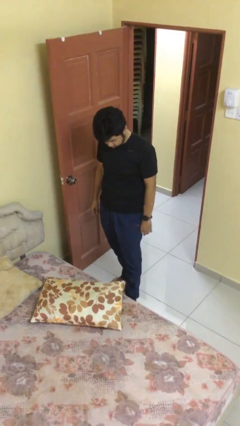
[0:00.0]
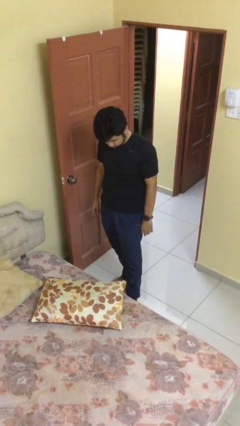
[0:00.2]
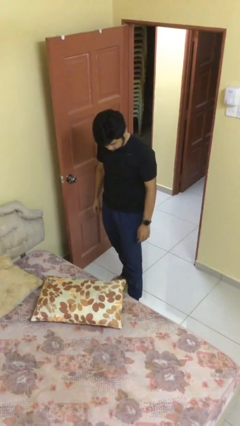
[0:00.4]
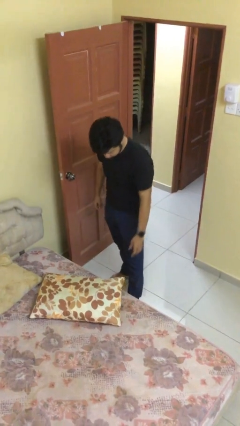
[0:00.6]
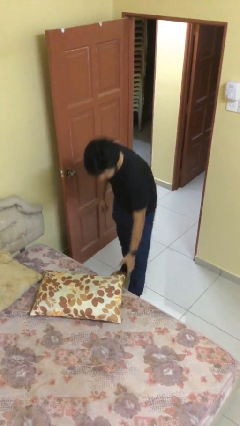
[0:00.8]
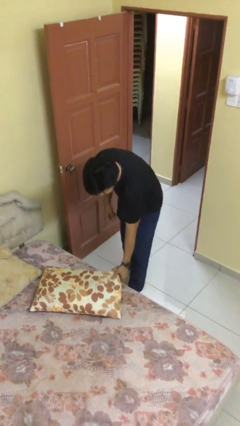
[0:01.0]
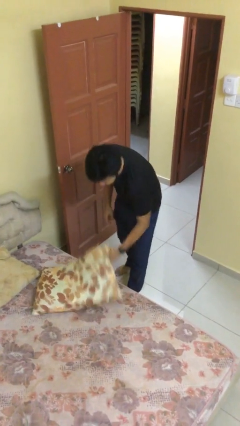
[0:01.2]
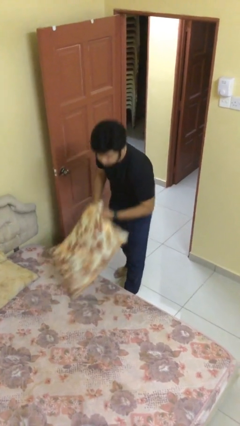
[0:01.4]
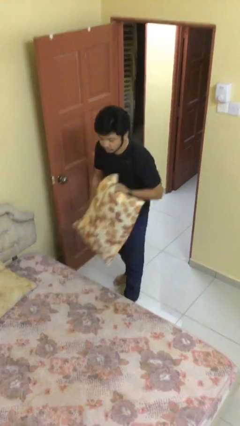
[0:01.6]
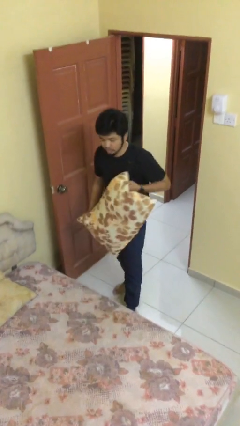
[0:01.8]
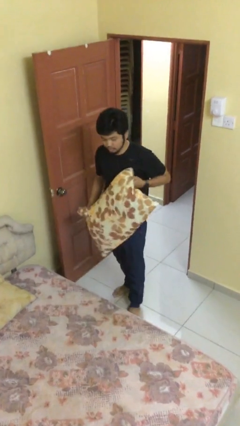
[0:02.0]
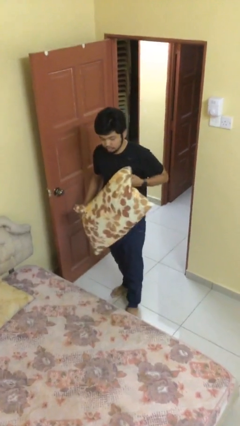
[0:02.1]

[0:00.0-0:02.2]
person picks up object from bed

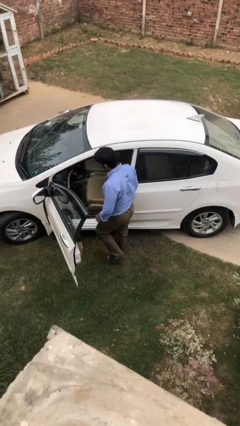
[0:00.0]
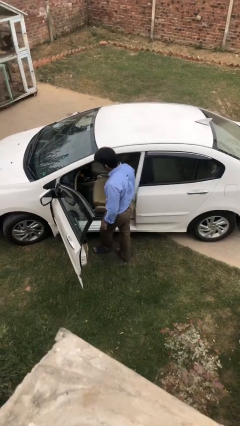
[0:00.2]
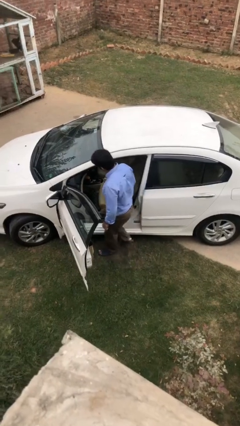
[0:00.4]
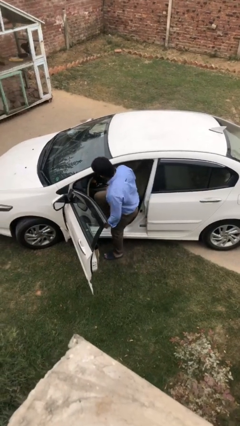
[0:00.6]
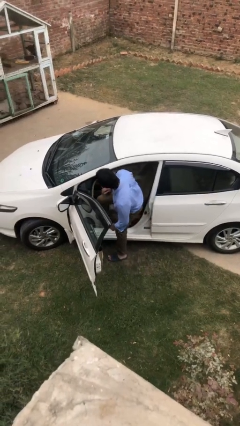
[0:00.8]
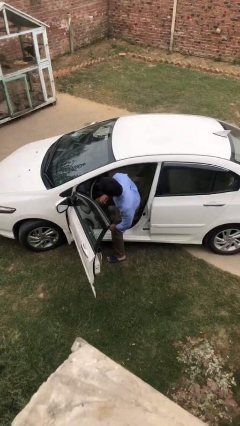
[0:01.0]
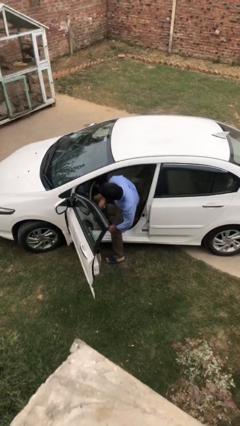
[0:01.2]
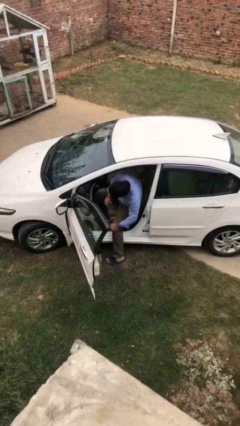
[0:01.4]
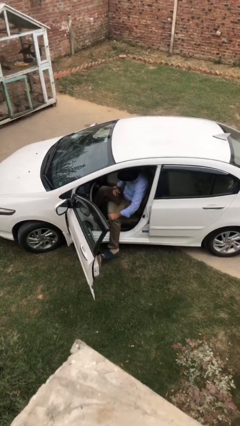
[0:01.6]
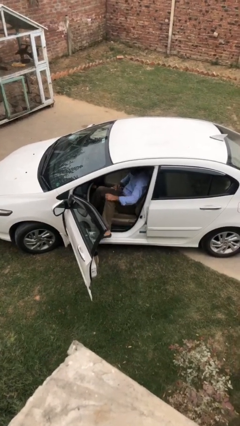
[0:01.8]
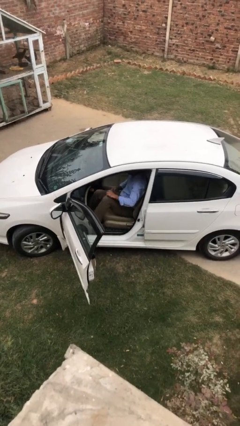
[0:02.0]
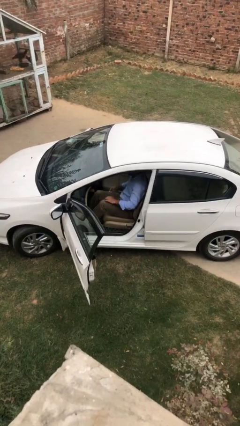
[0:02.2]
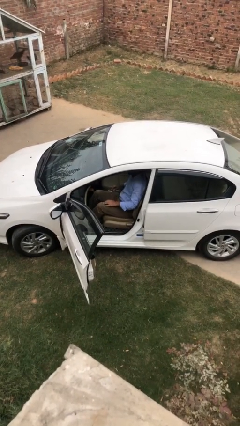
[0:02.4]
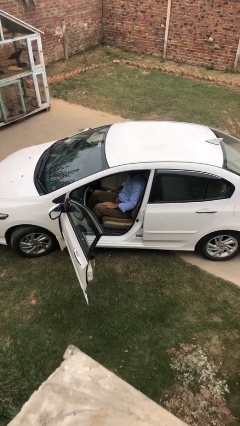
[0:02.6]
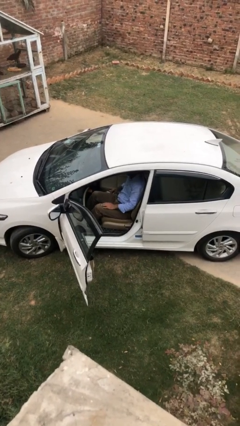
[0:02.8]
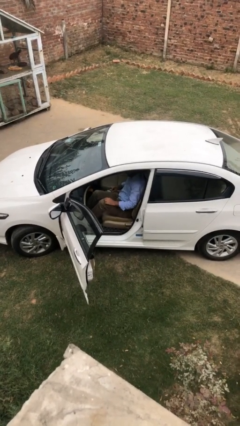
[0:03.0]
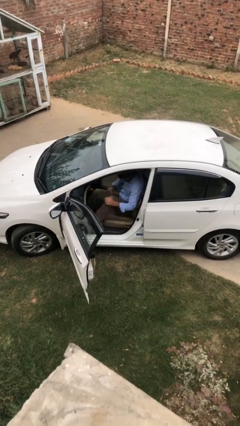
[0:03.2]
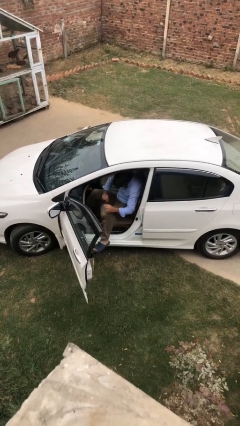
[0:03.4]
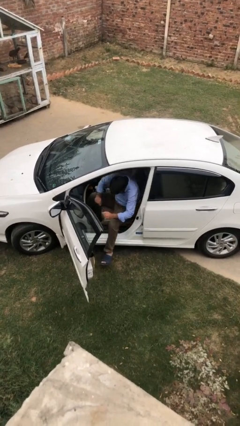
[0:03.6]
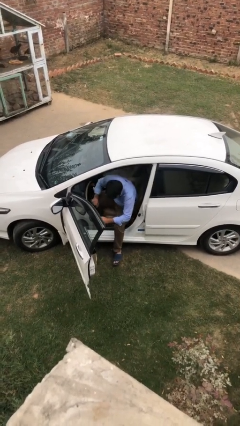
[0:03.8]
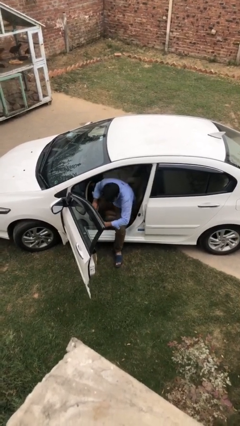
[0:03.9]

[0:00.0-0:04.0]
person enters car

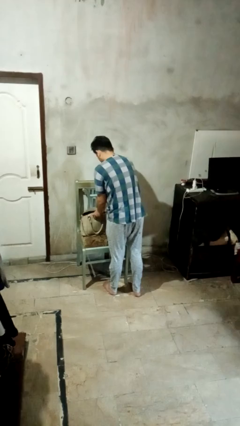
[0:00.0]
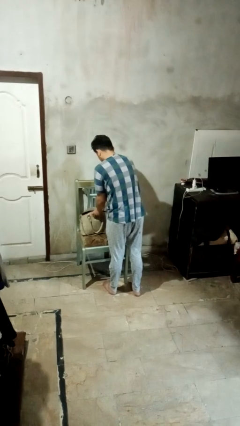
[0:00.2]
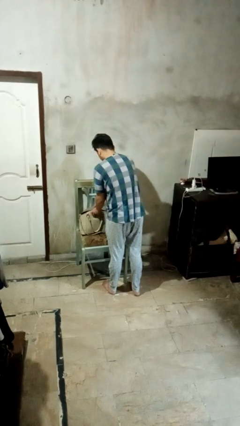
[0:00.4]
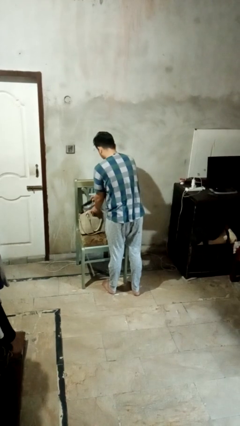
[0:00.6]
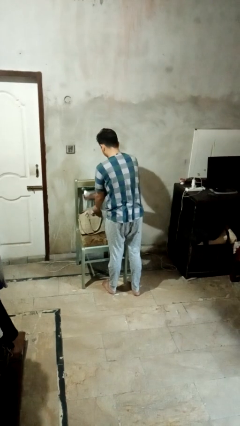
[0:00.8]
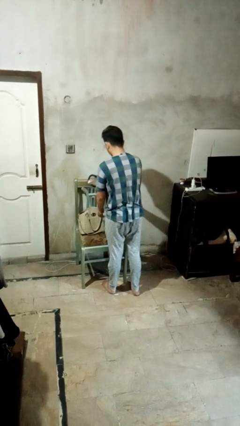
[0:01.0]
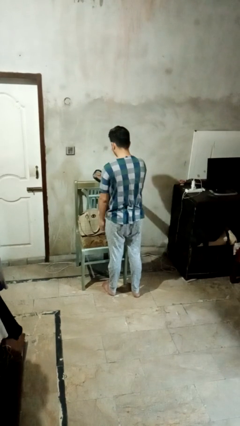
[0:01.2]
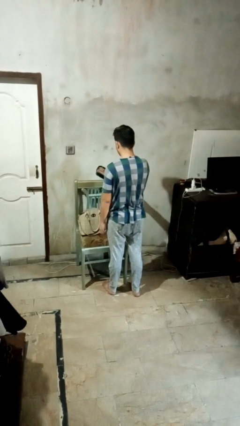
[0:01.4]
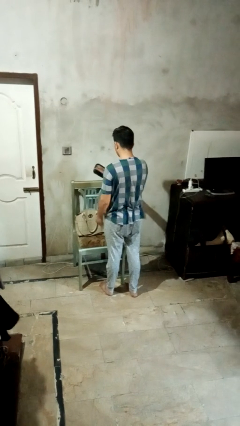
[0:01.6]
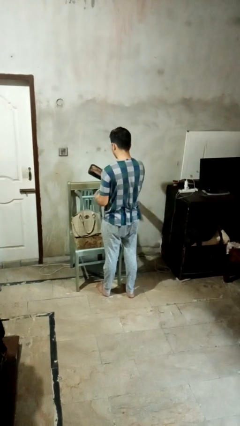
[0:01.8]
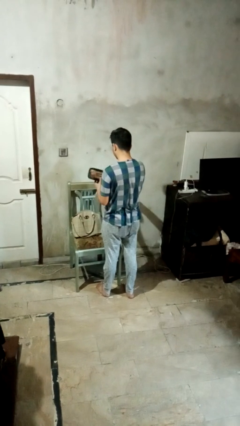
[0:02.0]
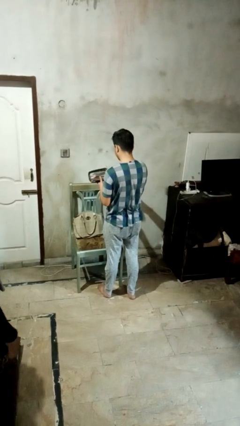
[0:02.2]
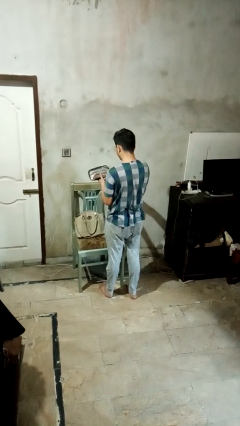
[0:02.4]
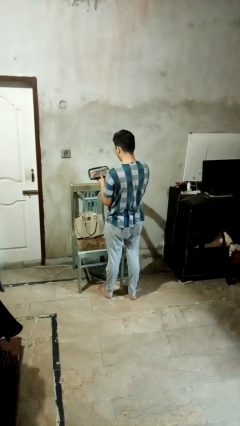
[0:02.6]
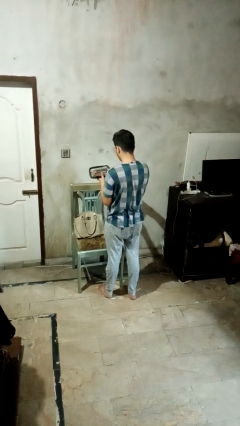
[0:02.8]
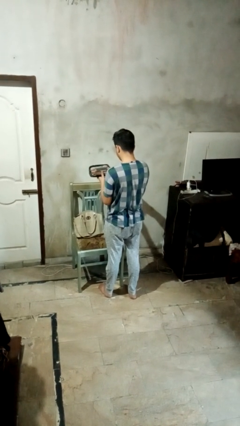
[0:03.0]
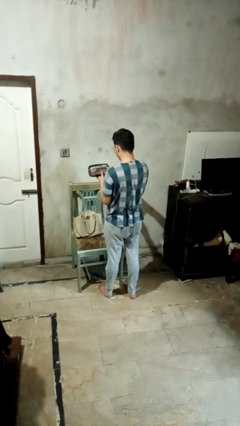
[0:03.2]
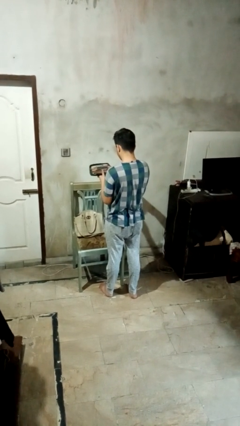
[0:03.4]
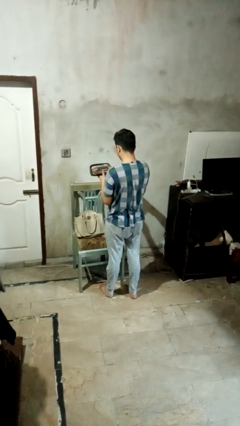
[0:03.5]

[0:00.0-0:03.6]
person takes object from purse

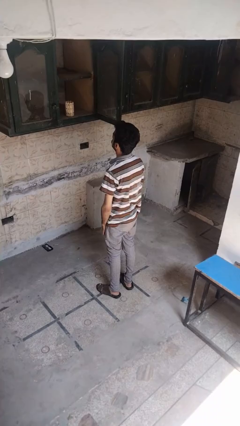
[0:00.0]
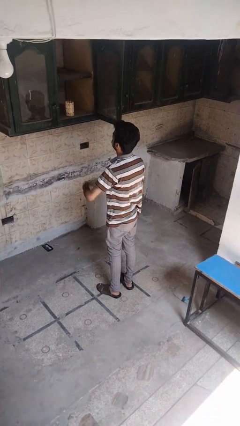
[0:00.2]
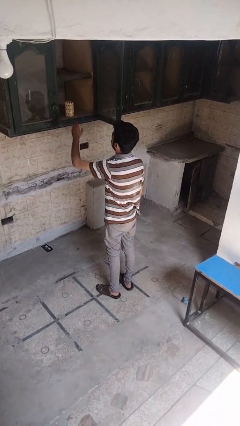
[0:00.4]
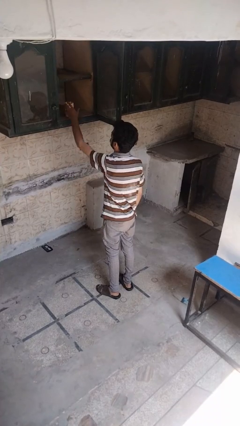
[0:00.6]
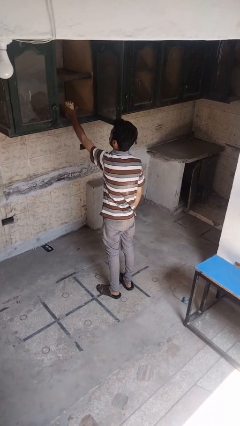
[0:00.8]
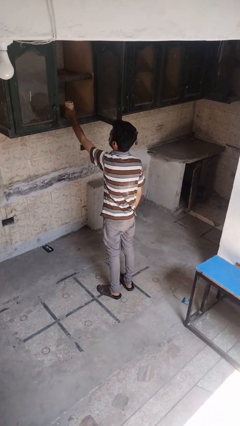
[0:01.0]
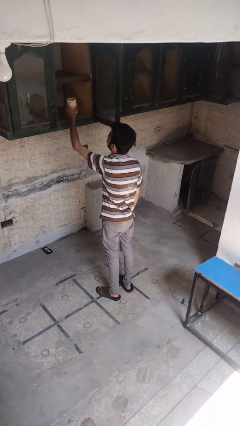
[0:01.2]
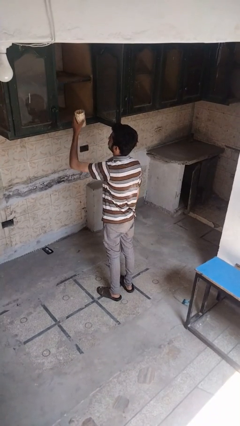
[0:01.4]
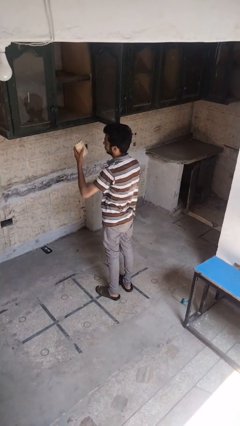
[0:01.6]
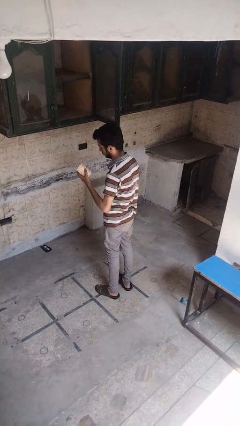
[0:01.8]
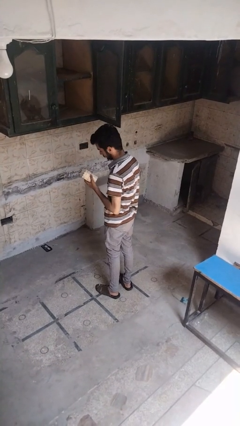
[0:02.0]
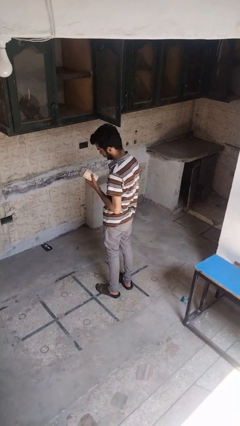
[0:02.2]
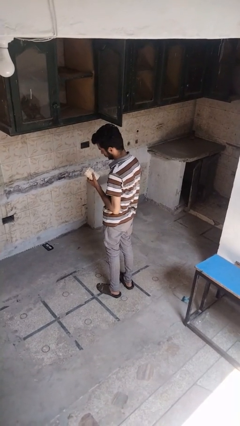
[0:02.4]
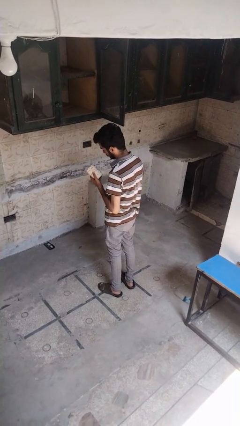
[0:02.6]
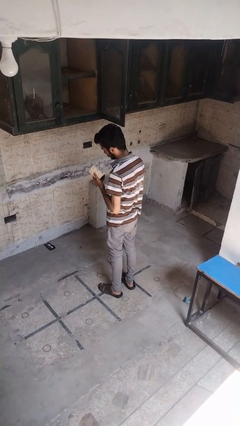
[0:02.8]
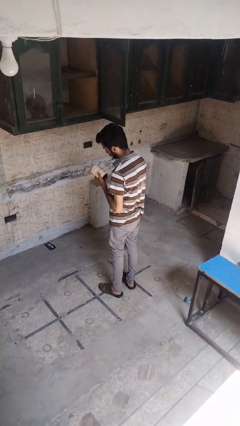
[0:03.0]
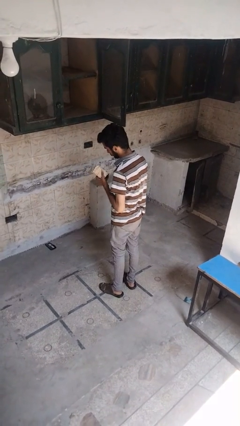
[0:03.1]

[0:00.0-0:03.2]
person picks up object from cabinet

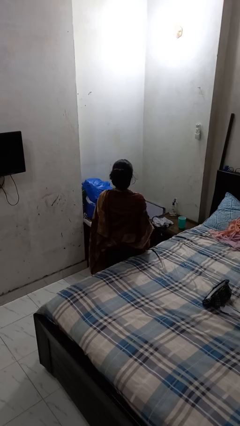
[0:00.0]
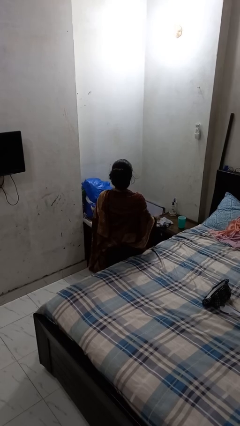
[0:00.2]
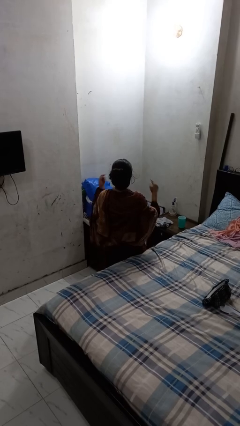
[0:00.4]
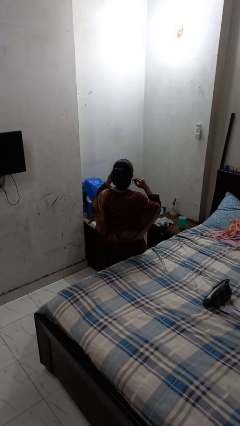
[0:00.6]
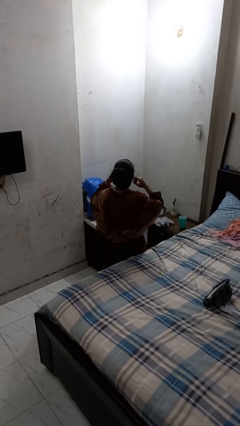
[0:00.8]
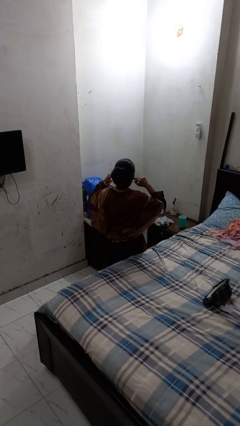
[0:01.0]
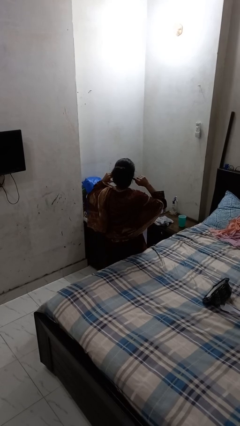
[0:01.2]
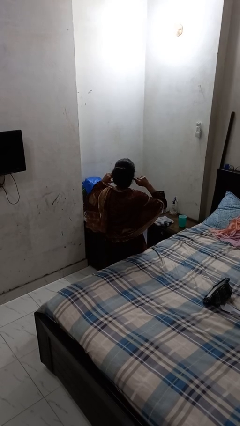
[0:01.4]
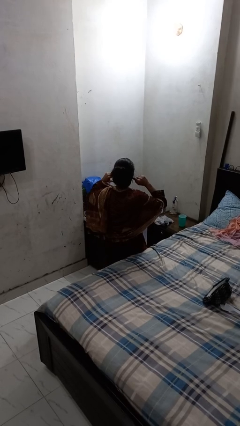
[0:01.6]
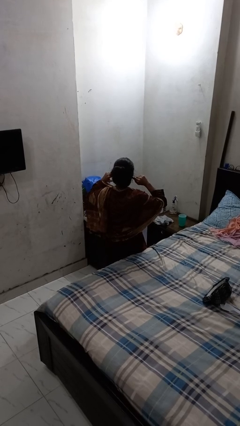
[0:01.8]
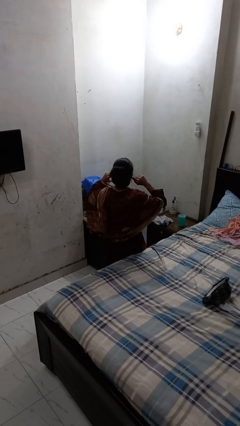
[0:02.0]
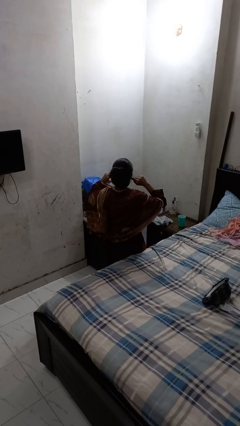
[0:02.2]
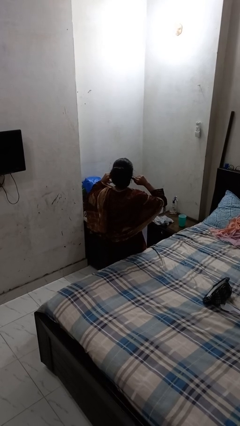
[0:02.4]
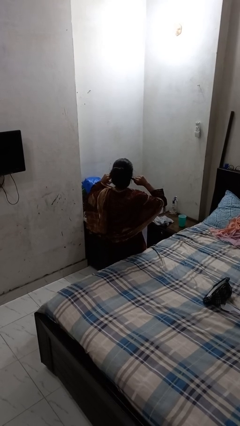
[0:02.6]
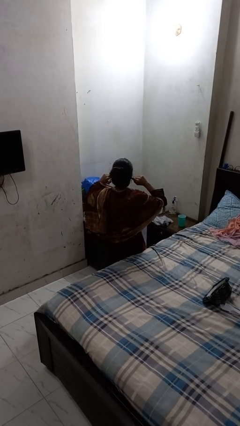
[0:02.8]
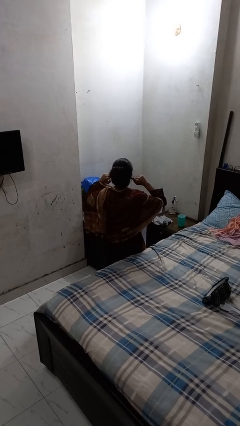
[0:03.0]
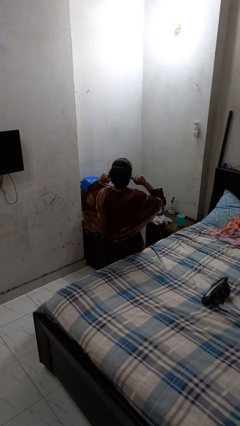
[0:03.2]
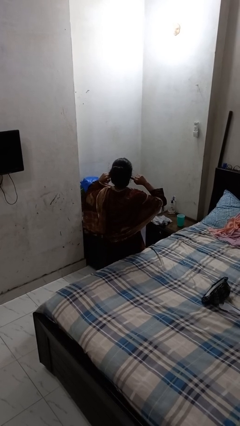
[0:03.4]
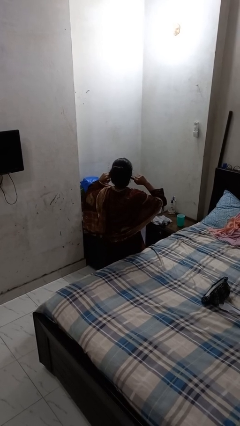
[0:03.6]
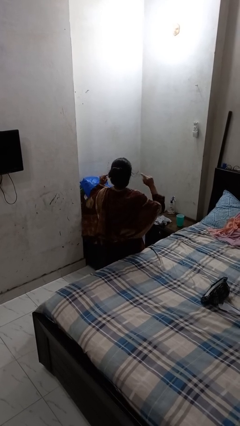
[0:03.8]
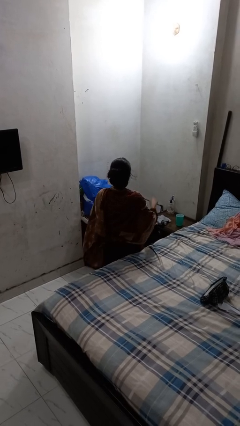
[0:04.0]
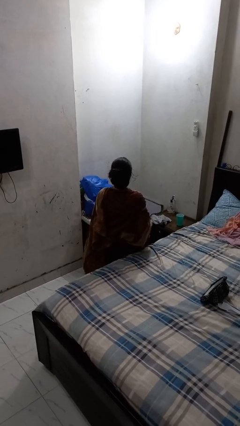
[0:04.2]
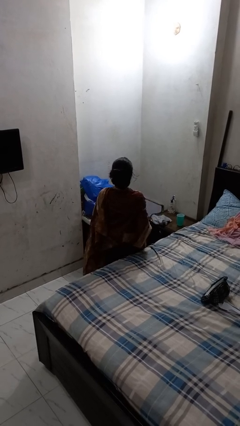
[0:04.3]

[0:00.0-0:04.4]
person puts fingers in ear
